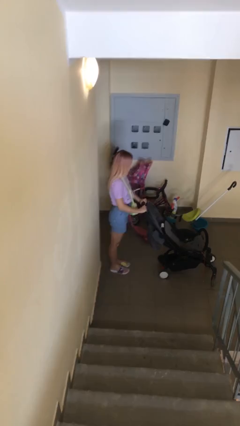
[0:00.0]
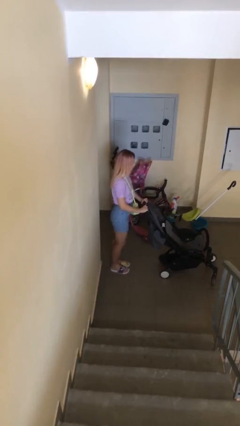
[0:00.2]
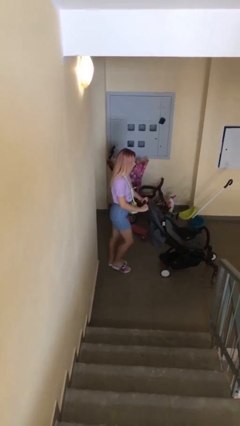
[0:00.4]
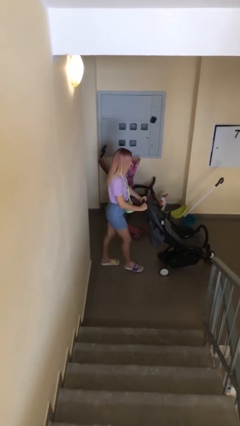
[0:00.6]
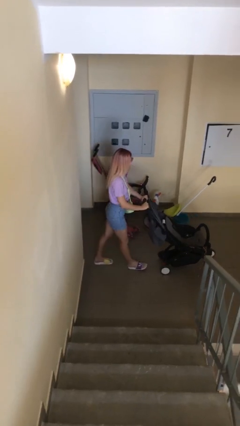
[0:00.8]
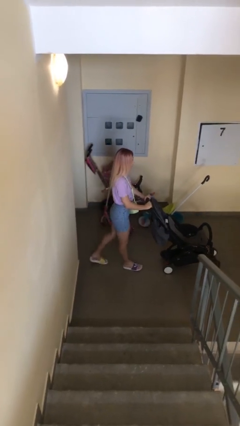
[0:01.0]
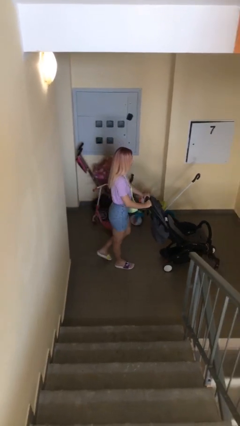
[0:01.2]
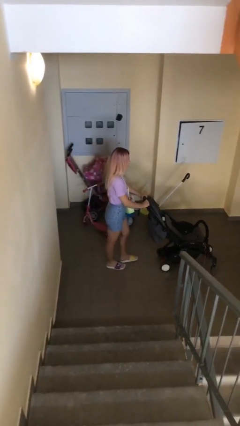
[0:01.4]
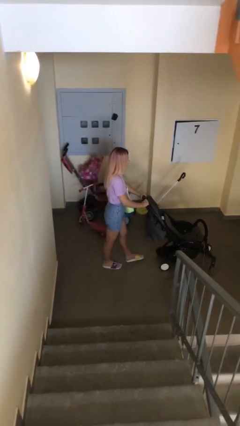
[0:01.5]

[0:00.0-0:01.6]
person pushes wheeled cart

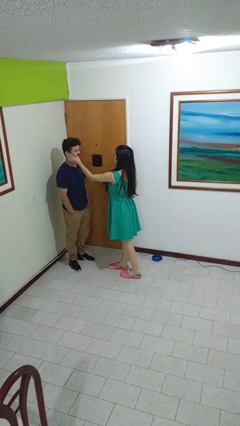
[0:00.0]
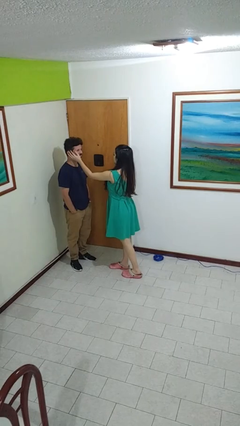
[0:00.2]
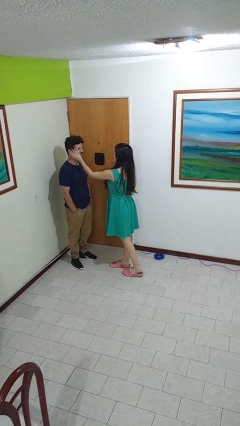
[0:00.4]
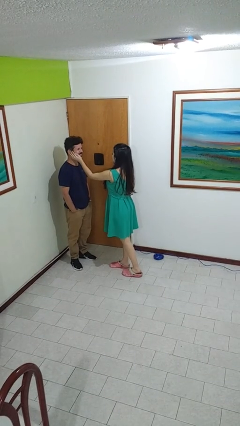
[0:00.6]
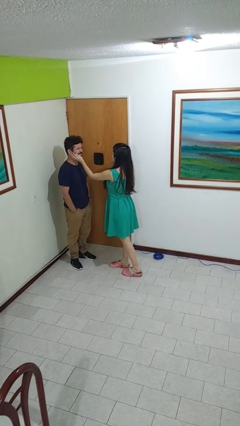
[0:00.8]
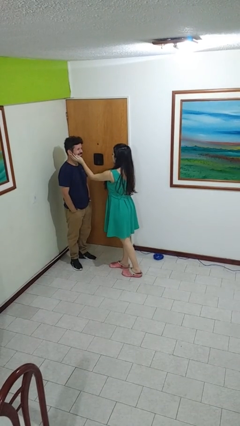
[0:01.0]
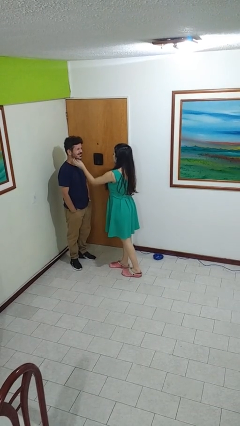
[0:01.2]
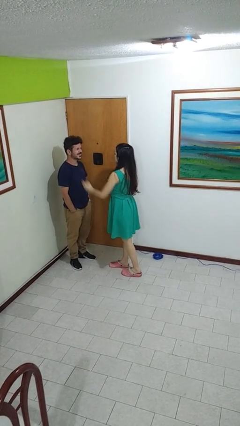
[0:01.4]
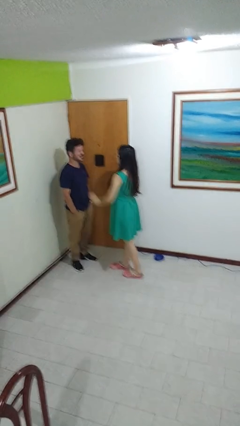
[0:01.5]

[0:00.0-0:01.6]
person touches face of person

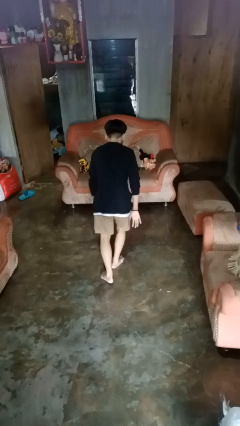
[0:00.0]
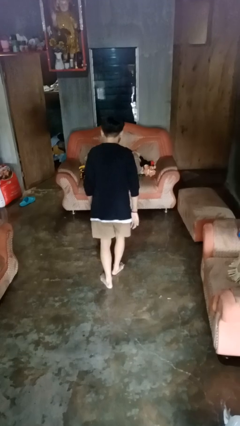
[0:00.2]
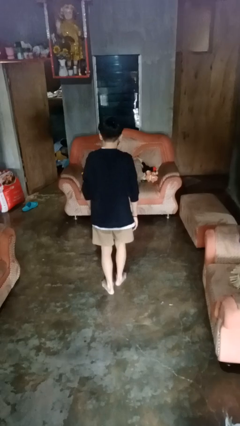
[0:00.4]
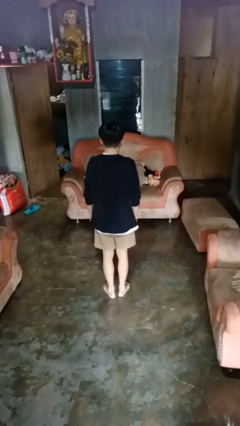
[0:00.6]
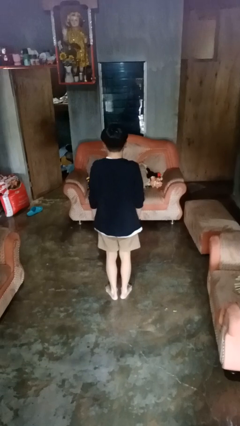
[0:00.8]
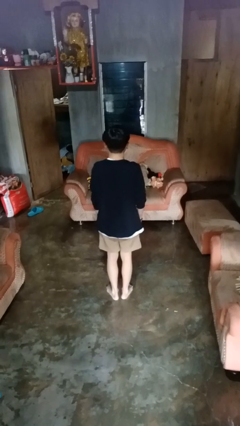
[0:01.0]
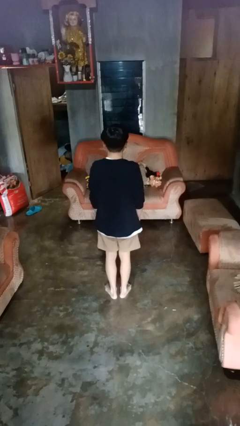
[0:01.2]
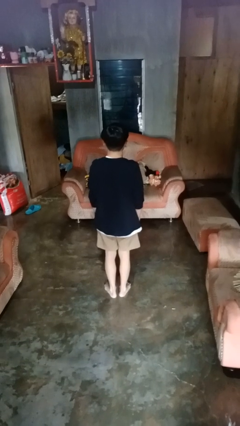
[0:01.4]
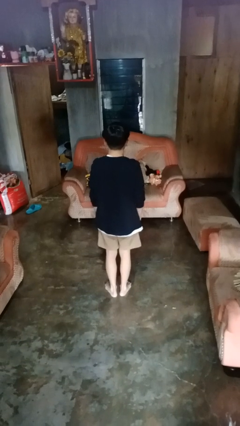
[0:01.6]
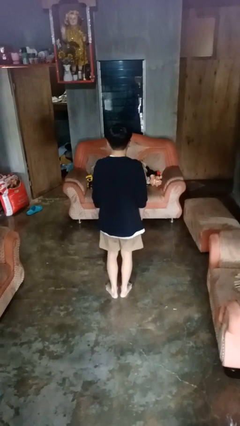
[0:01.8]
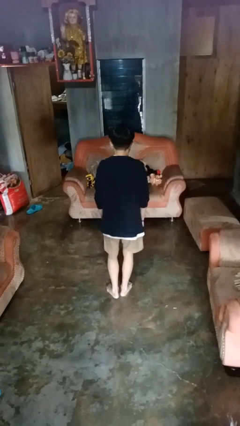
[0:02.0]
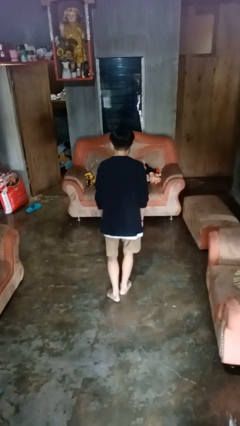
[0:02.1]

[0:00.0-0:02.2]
person stands up from floor

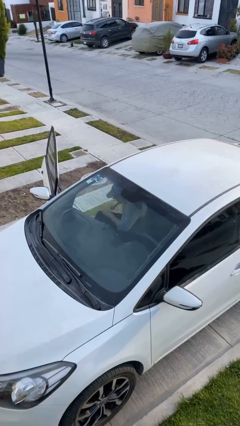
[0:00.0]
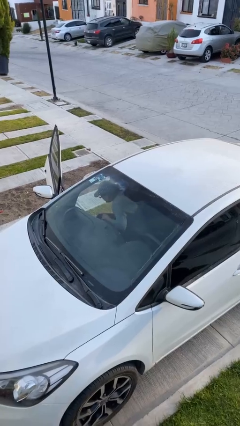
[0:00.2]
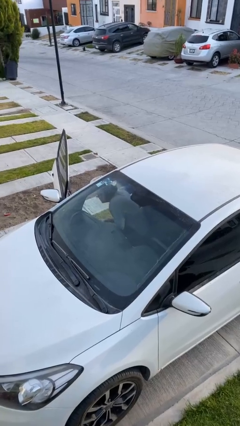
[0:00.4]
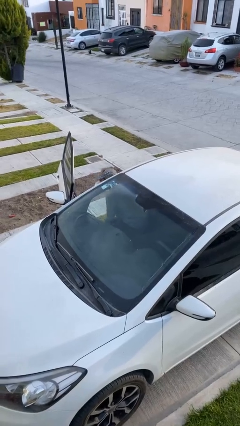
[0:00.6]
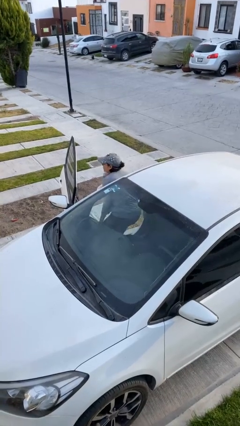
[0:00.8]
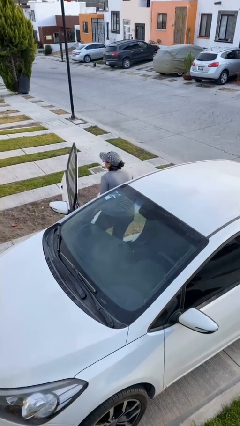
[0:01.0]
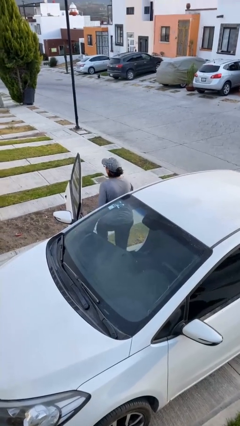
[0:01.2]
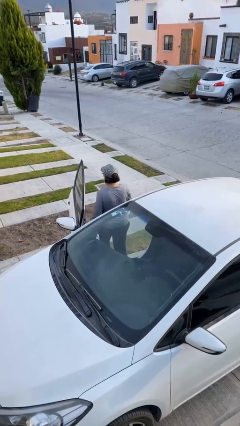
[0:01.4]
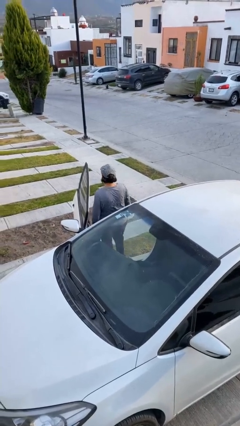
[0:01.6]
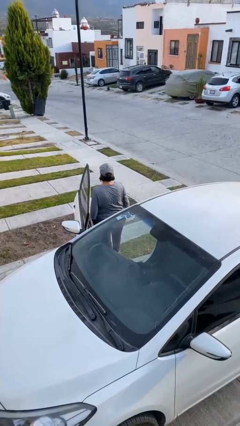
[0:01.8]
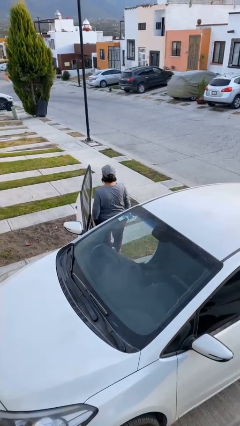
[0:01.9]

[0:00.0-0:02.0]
person exits car

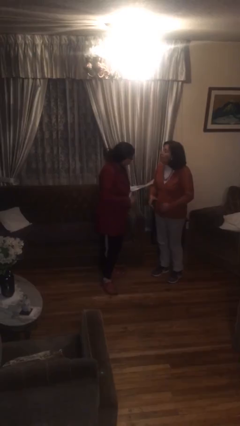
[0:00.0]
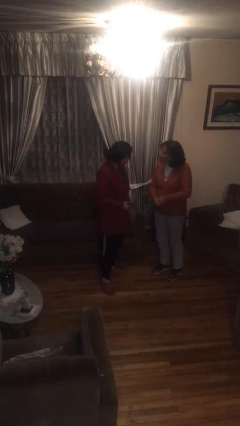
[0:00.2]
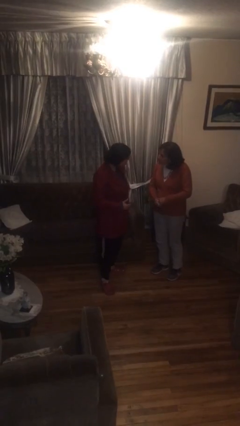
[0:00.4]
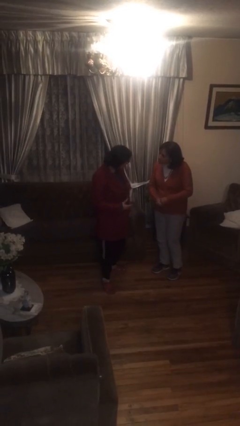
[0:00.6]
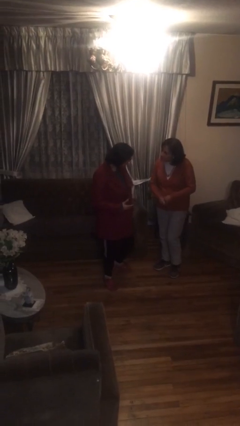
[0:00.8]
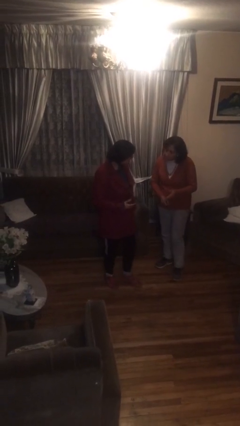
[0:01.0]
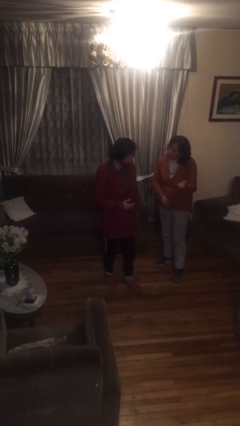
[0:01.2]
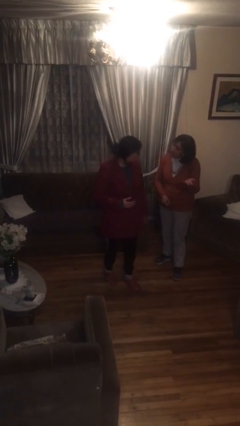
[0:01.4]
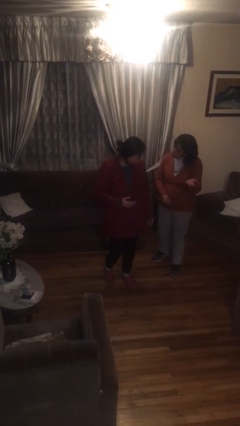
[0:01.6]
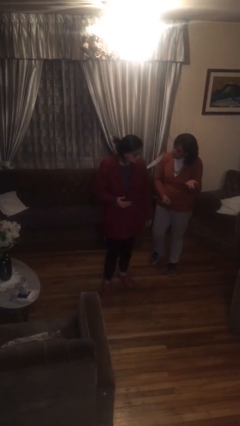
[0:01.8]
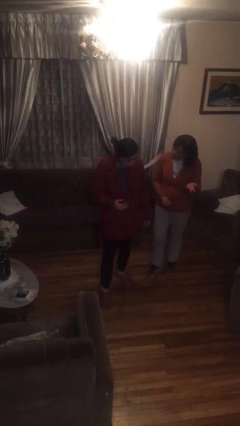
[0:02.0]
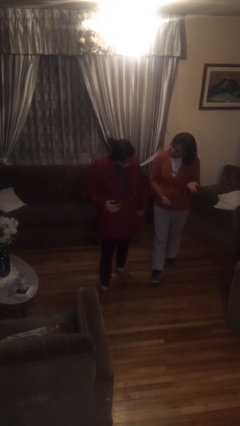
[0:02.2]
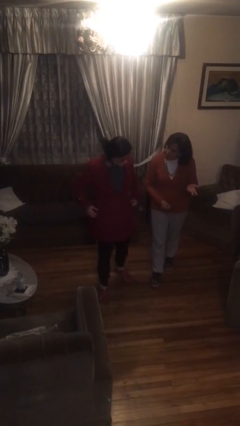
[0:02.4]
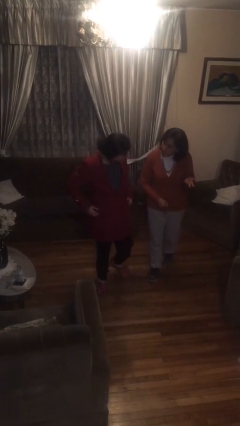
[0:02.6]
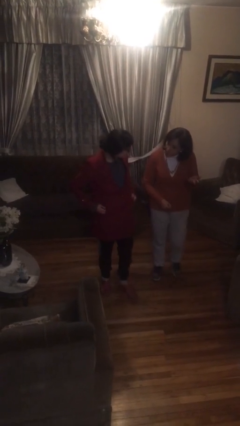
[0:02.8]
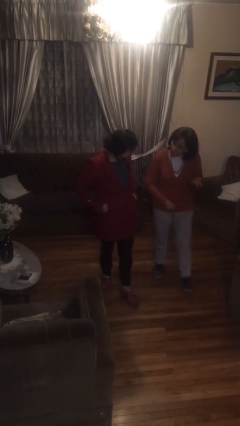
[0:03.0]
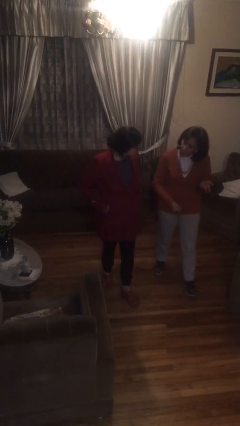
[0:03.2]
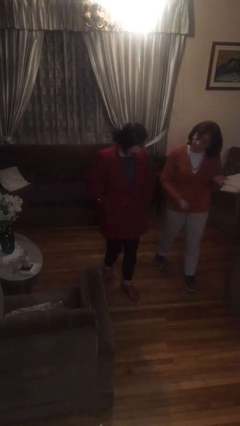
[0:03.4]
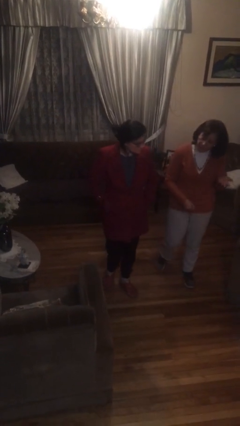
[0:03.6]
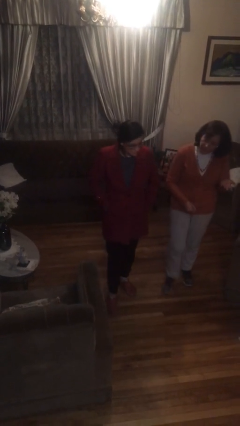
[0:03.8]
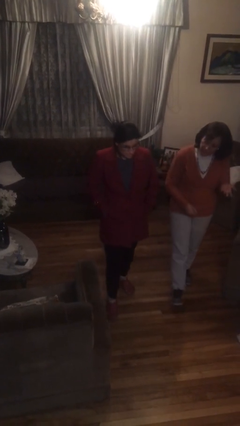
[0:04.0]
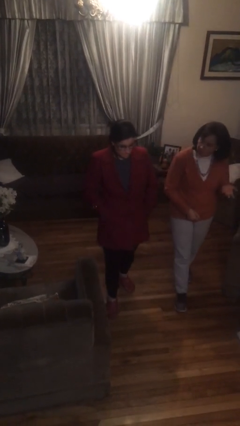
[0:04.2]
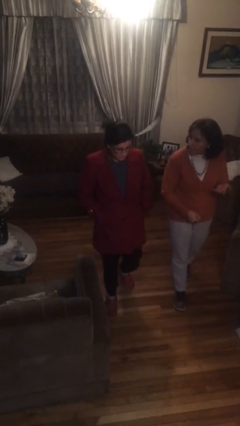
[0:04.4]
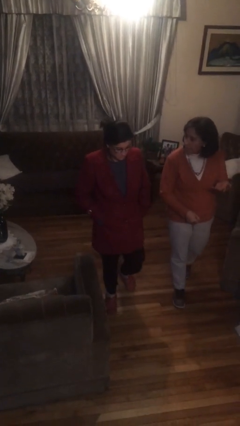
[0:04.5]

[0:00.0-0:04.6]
person talks to person

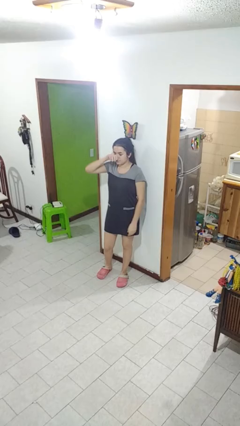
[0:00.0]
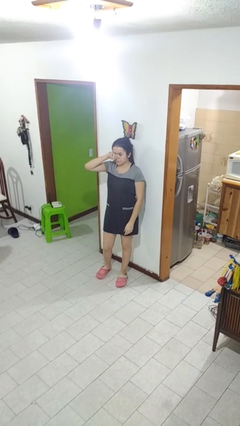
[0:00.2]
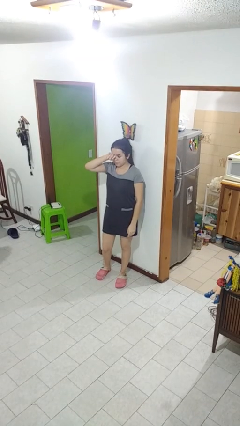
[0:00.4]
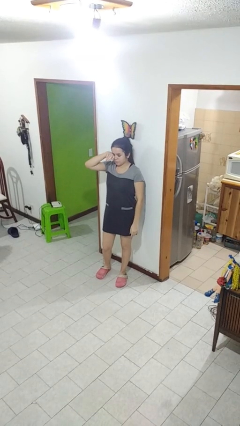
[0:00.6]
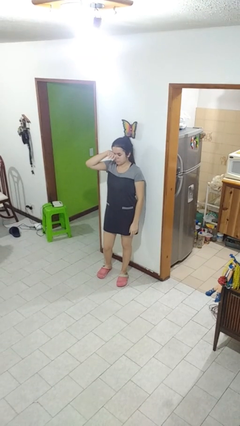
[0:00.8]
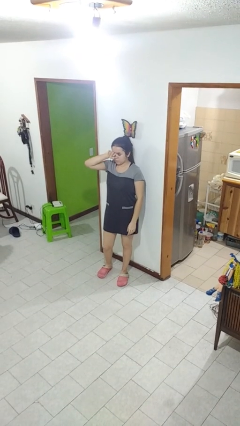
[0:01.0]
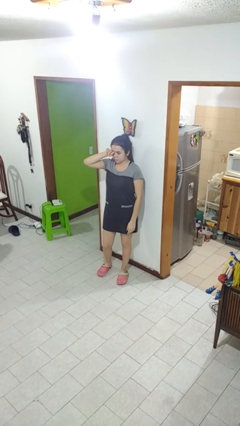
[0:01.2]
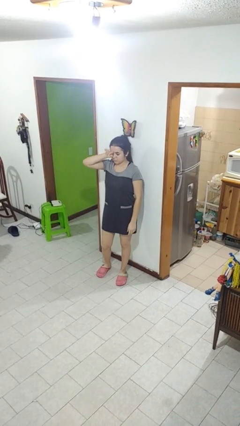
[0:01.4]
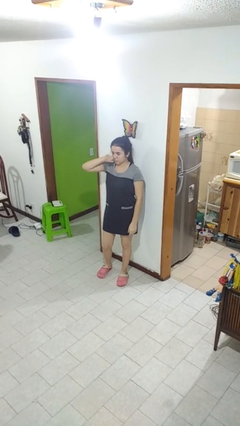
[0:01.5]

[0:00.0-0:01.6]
person rubs eyes

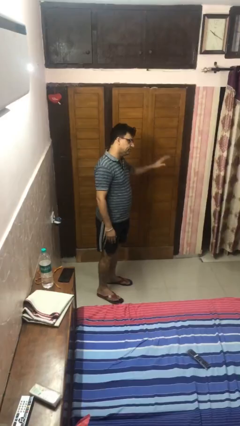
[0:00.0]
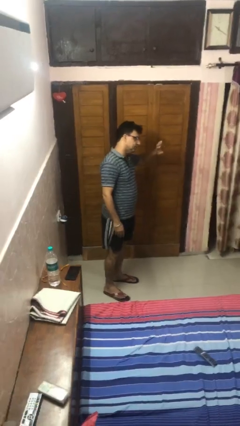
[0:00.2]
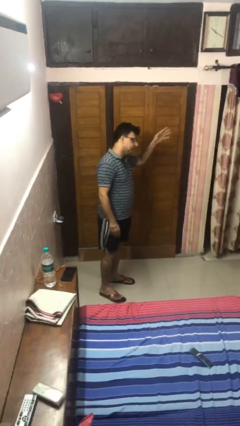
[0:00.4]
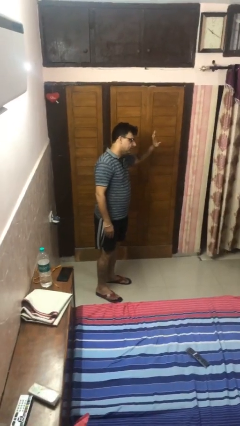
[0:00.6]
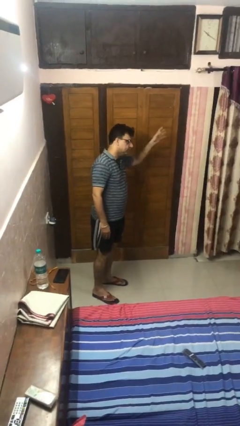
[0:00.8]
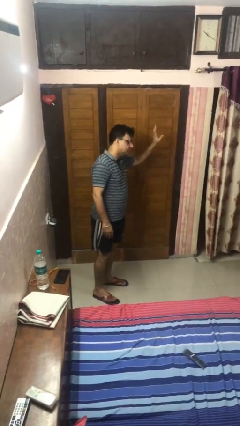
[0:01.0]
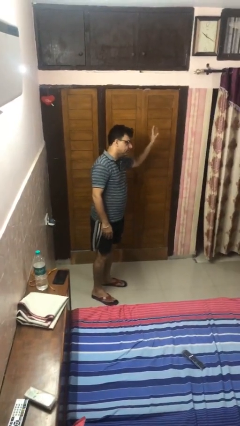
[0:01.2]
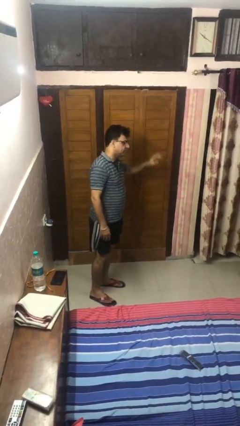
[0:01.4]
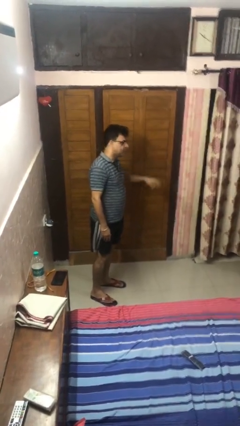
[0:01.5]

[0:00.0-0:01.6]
person waves at person

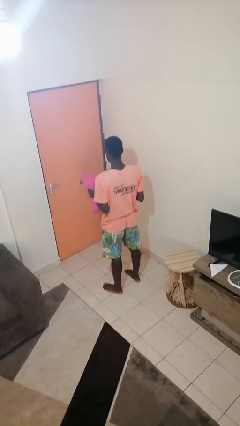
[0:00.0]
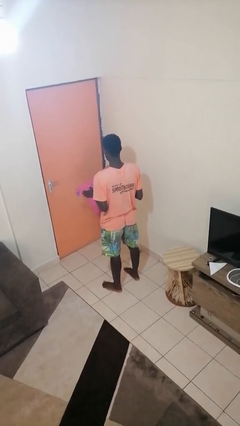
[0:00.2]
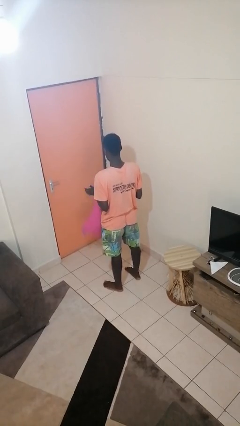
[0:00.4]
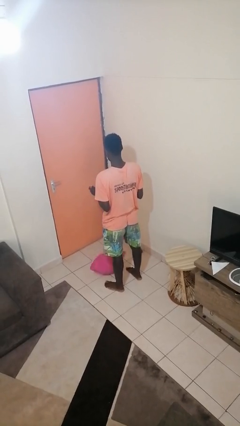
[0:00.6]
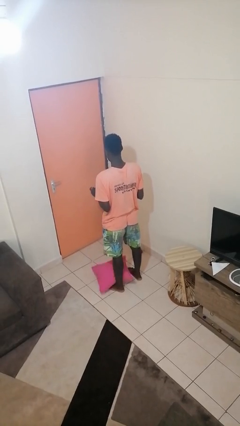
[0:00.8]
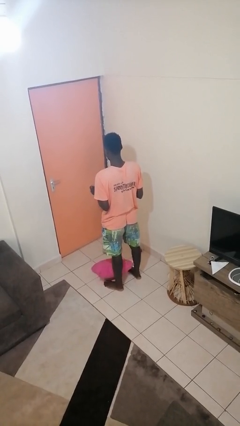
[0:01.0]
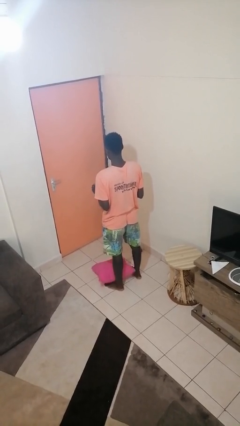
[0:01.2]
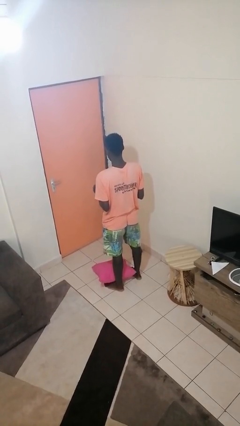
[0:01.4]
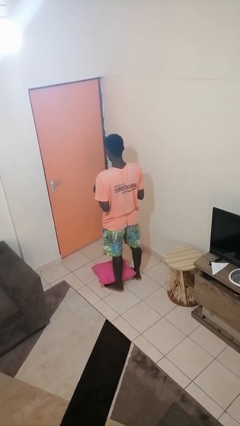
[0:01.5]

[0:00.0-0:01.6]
person drops object
